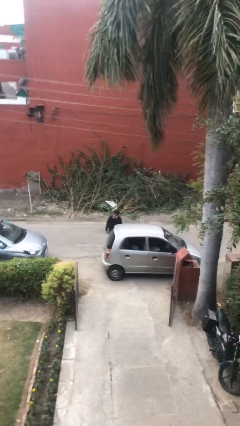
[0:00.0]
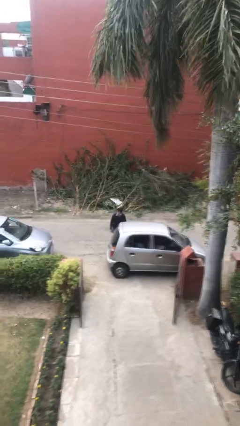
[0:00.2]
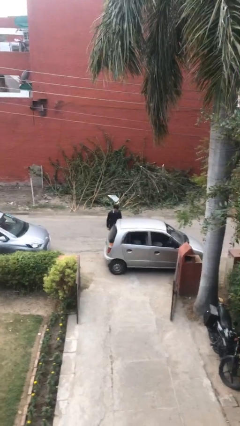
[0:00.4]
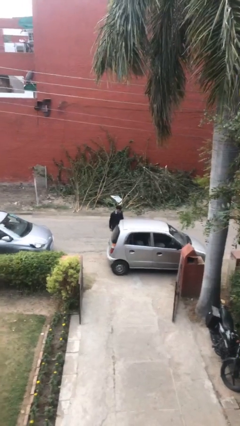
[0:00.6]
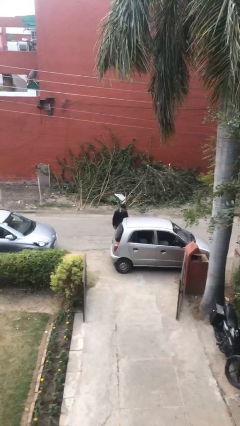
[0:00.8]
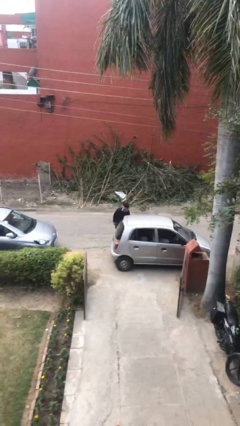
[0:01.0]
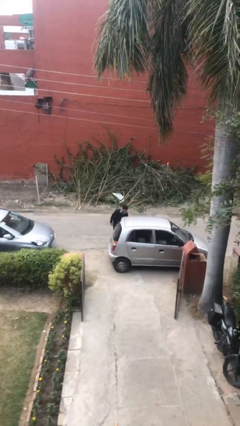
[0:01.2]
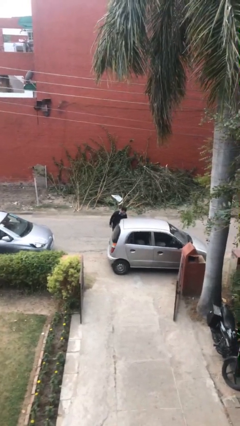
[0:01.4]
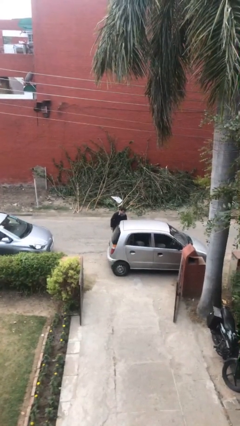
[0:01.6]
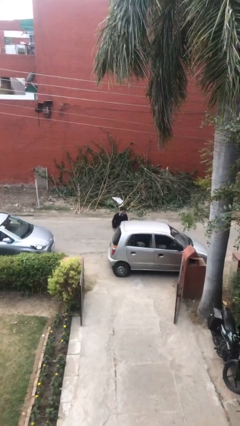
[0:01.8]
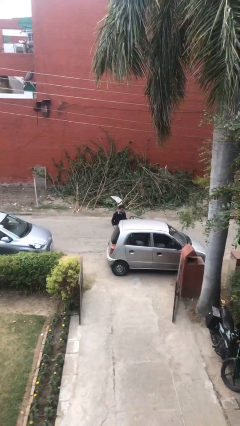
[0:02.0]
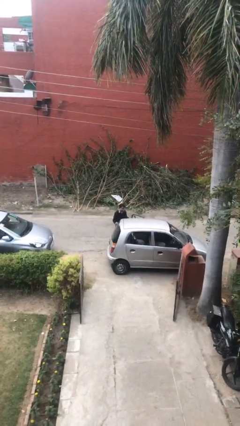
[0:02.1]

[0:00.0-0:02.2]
person opens car door

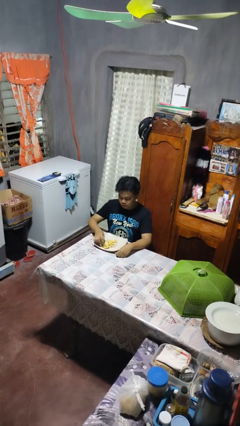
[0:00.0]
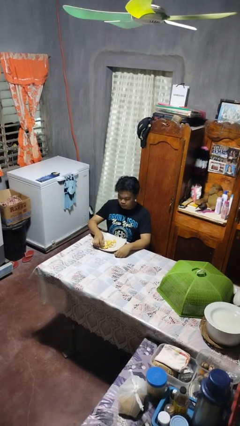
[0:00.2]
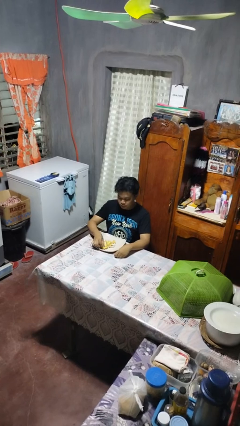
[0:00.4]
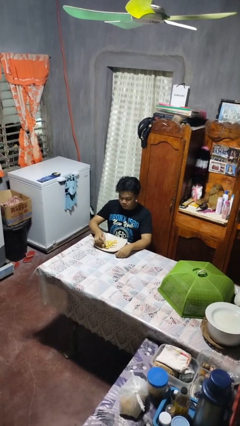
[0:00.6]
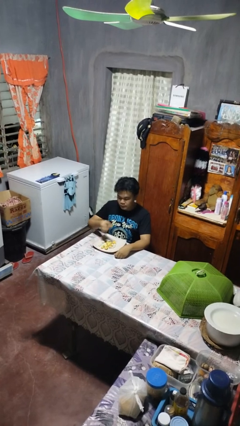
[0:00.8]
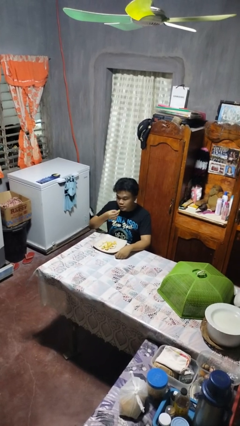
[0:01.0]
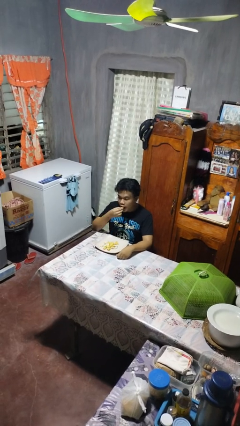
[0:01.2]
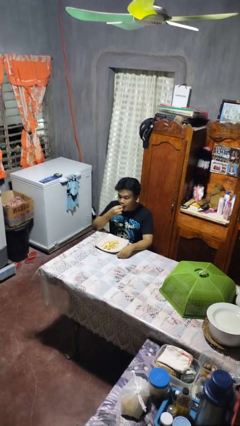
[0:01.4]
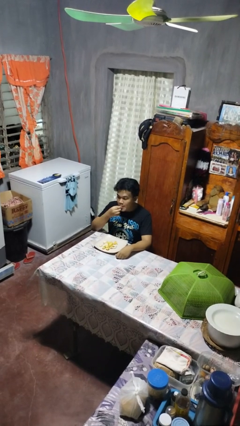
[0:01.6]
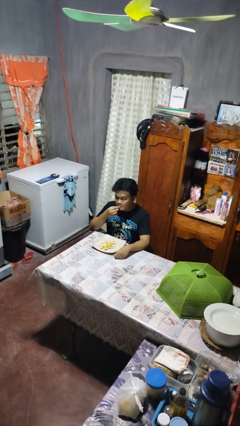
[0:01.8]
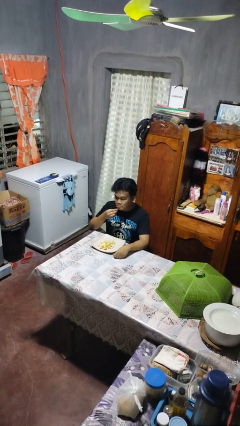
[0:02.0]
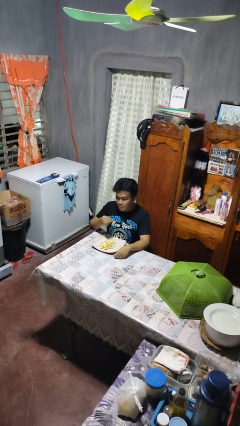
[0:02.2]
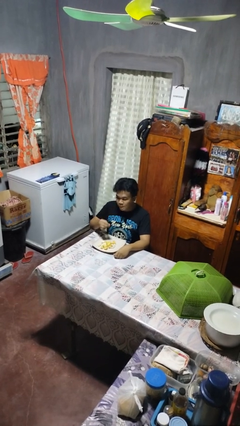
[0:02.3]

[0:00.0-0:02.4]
person eats with hands

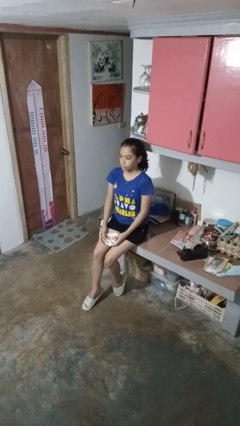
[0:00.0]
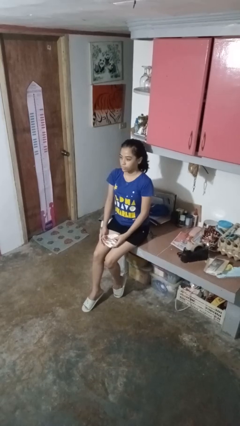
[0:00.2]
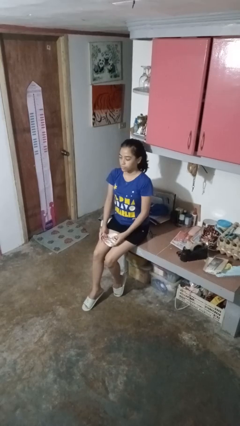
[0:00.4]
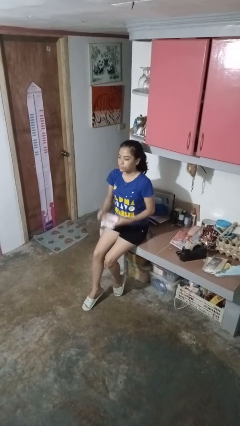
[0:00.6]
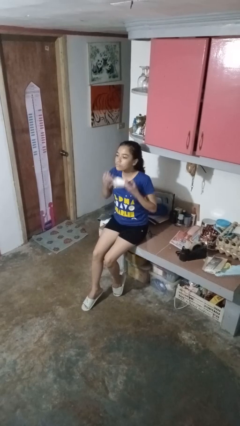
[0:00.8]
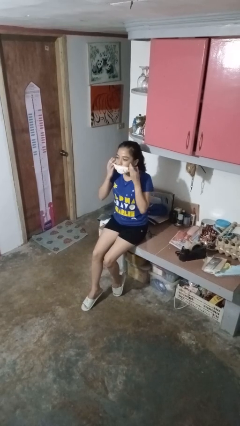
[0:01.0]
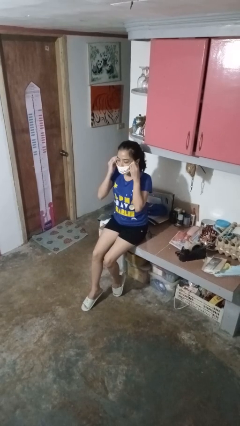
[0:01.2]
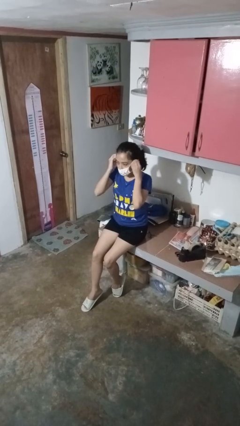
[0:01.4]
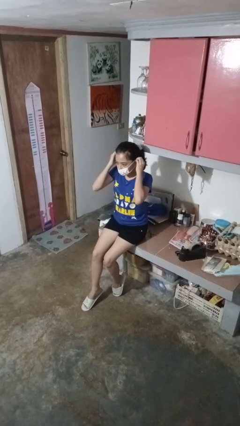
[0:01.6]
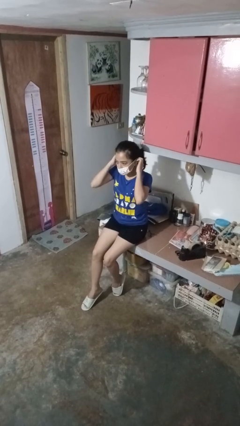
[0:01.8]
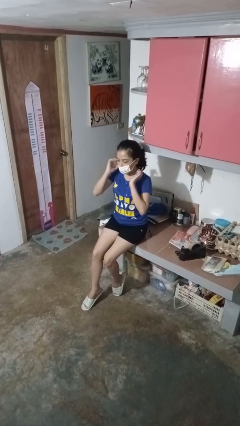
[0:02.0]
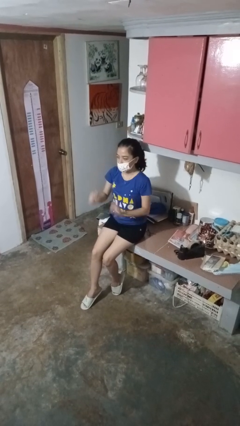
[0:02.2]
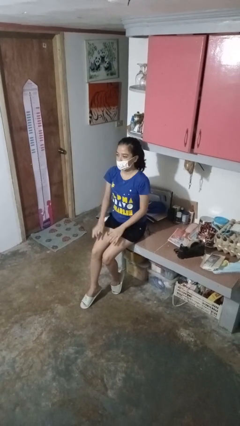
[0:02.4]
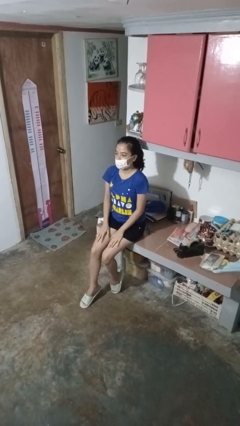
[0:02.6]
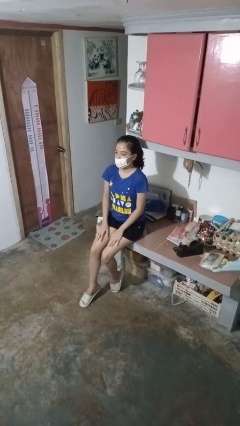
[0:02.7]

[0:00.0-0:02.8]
person puts on facemask

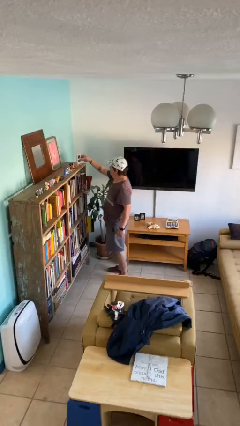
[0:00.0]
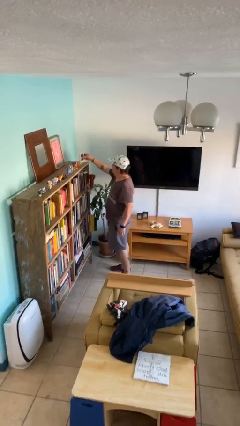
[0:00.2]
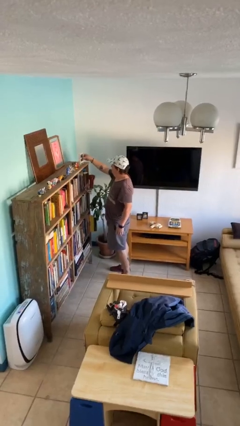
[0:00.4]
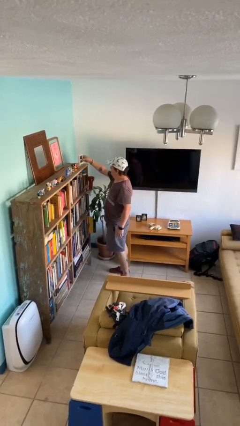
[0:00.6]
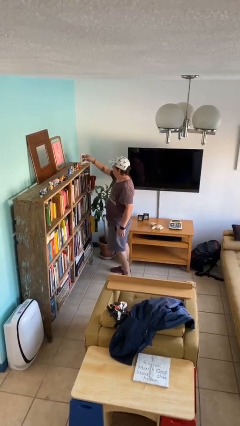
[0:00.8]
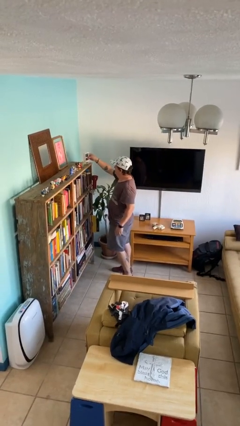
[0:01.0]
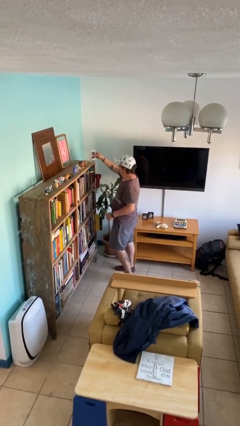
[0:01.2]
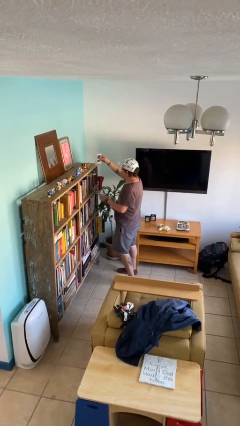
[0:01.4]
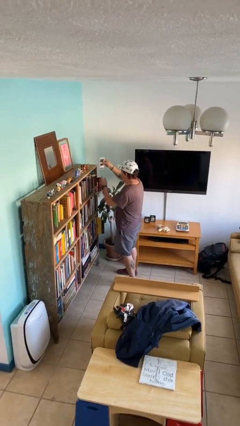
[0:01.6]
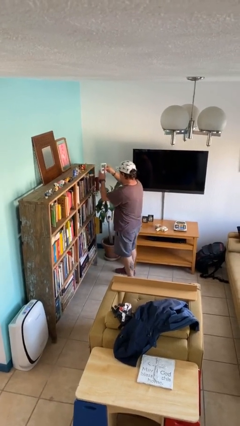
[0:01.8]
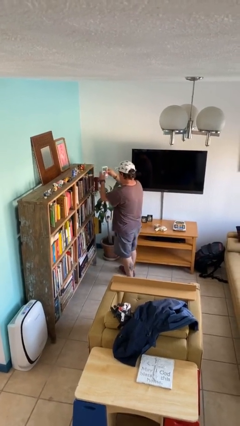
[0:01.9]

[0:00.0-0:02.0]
person picks up object from shelf

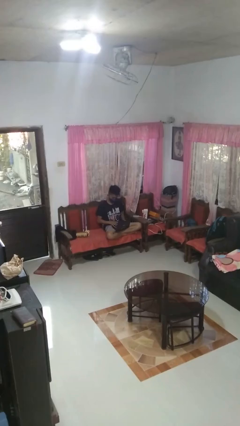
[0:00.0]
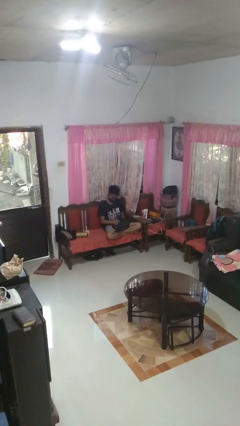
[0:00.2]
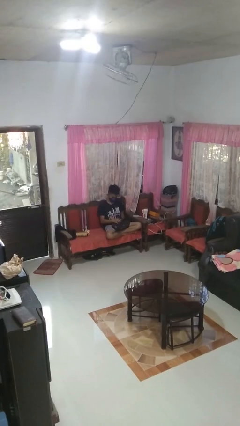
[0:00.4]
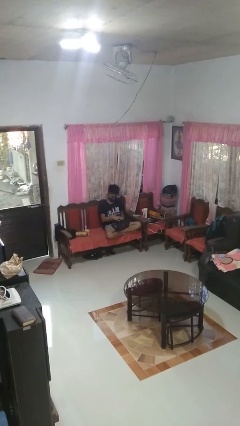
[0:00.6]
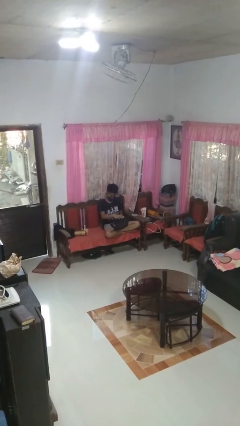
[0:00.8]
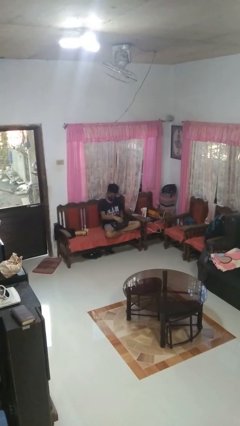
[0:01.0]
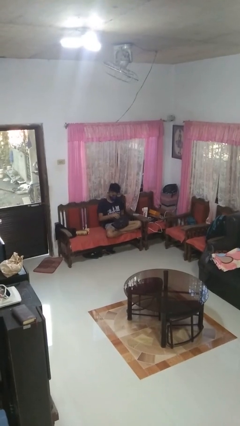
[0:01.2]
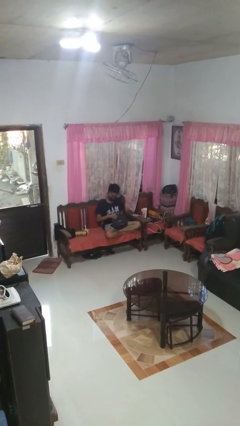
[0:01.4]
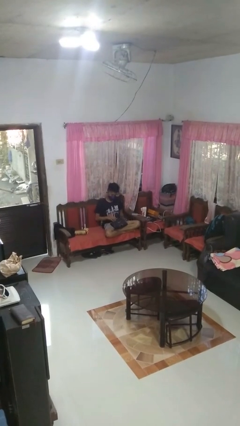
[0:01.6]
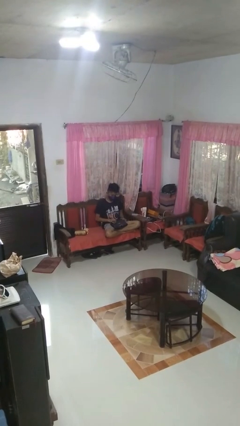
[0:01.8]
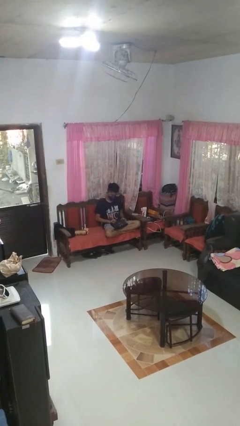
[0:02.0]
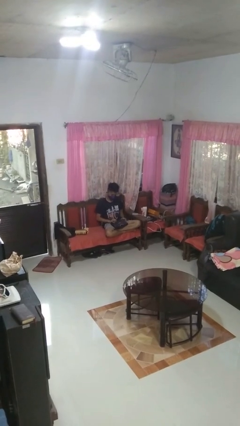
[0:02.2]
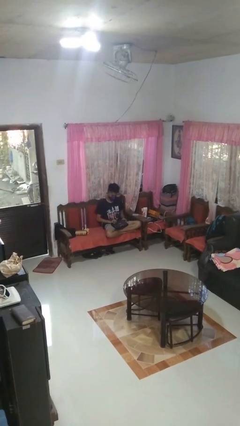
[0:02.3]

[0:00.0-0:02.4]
person closes laptop

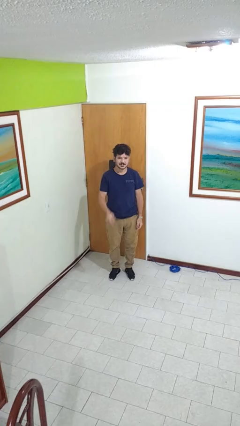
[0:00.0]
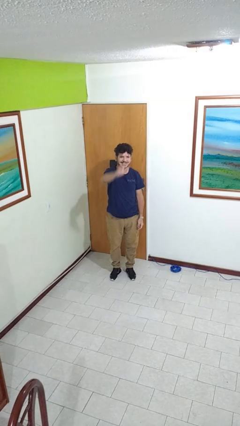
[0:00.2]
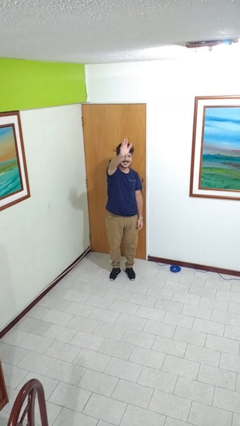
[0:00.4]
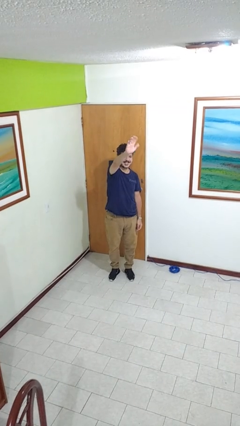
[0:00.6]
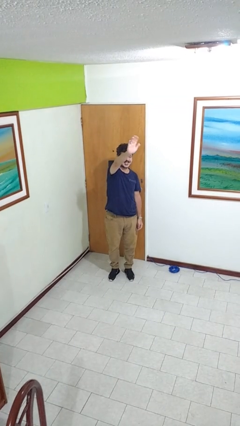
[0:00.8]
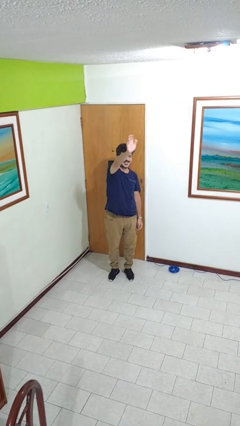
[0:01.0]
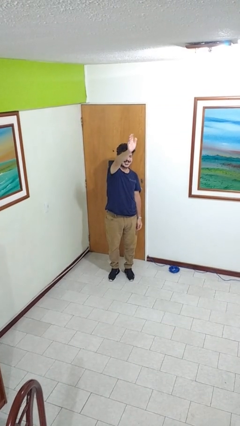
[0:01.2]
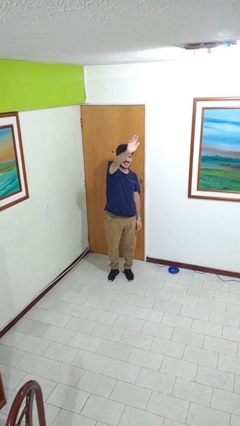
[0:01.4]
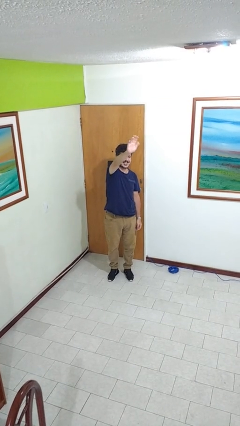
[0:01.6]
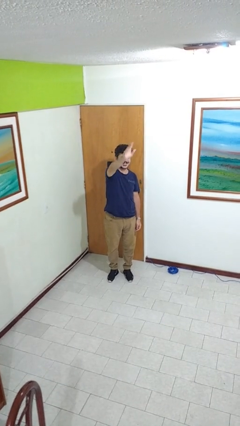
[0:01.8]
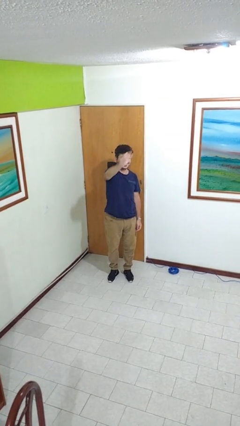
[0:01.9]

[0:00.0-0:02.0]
person waves at person

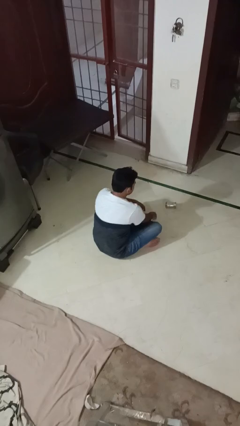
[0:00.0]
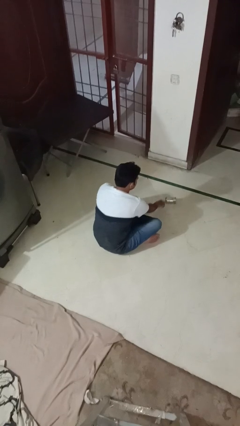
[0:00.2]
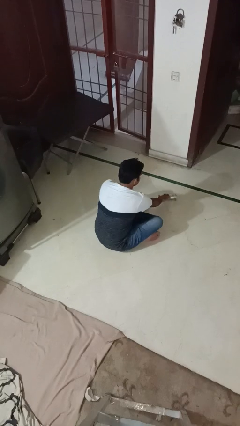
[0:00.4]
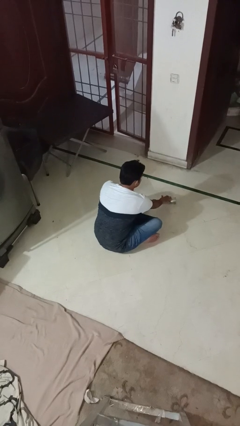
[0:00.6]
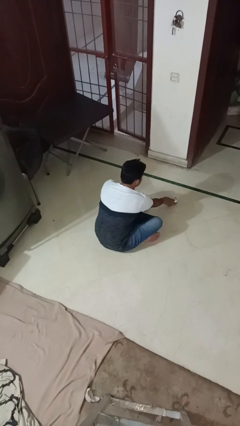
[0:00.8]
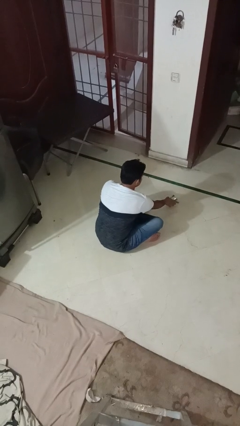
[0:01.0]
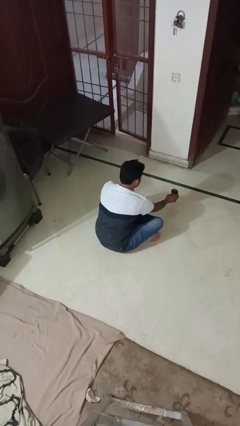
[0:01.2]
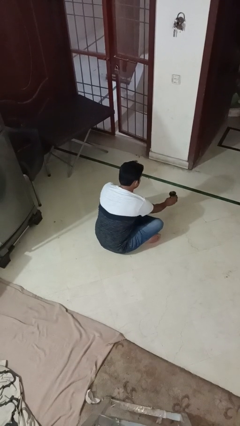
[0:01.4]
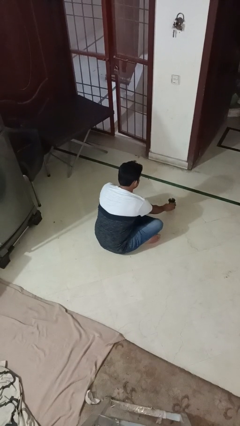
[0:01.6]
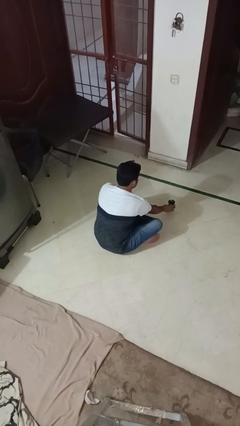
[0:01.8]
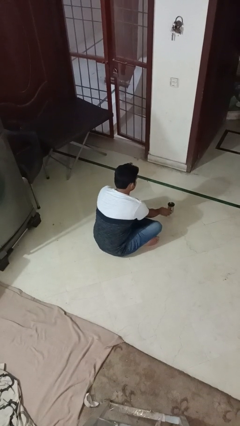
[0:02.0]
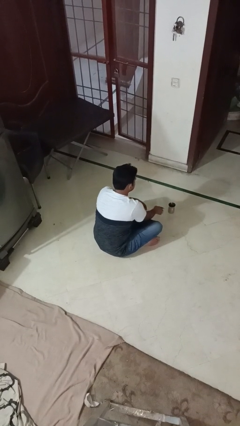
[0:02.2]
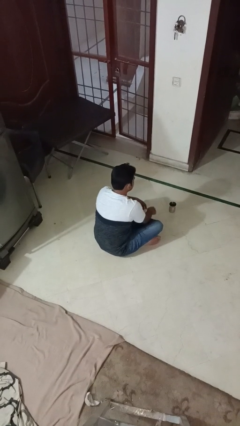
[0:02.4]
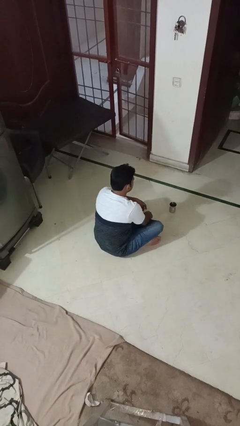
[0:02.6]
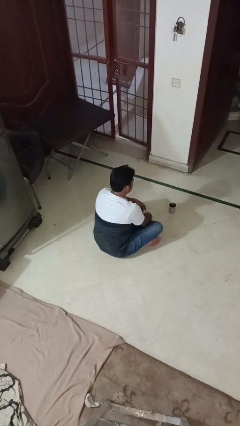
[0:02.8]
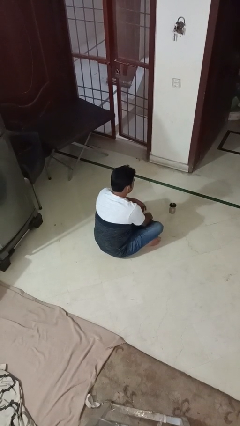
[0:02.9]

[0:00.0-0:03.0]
person sets upright glass

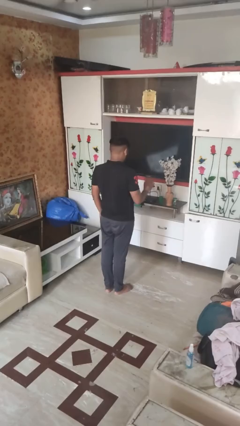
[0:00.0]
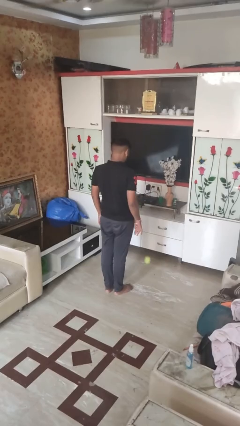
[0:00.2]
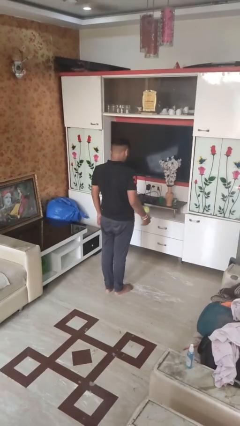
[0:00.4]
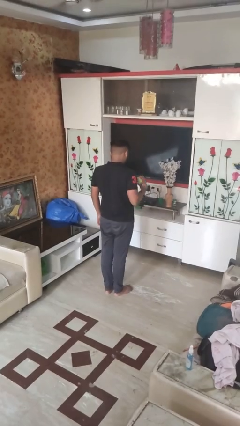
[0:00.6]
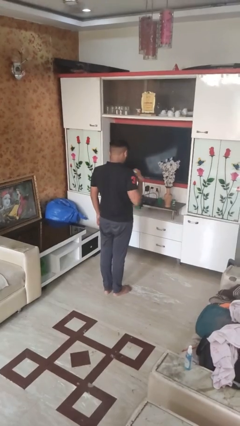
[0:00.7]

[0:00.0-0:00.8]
person bounces ball on floor
